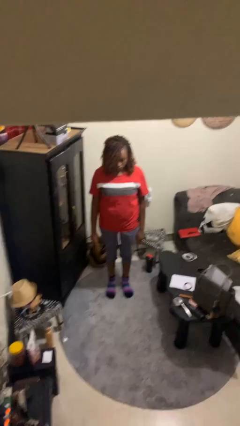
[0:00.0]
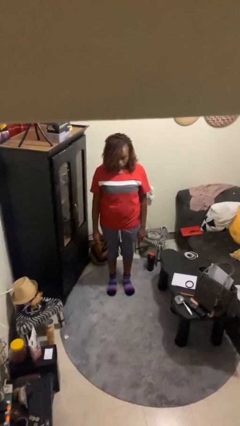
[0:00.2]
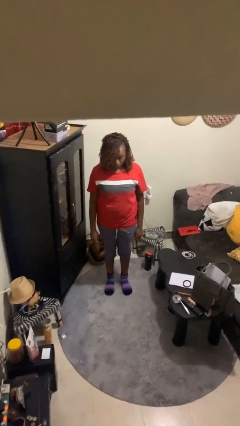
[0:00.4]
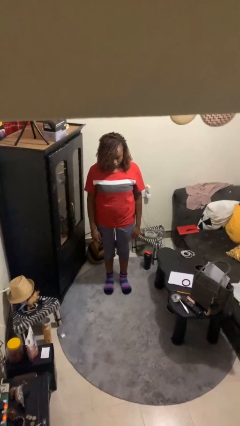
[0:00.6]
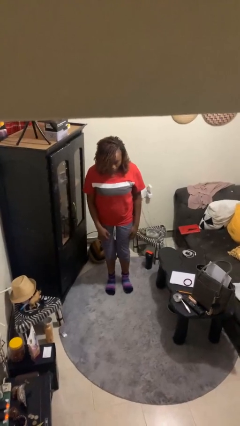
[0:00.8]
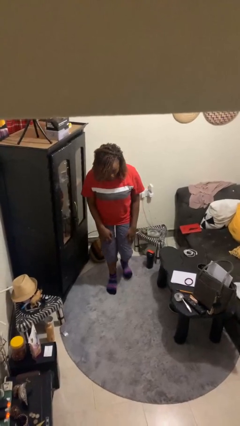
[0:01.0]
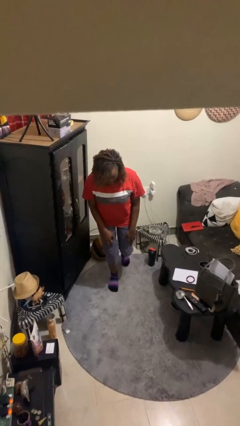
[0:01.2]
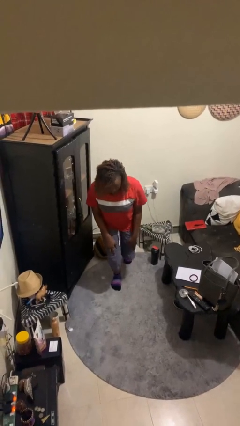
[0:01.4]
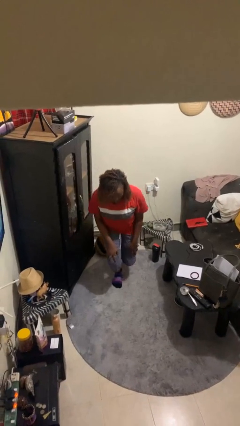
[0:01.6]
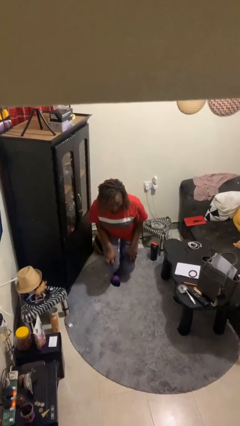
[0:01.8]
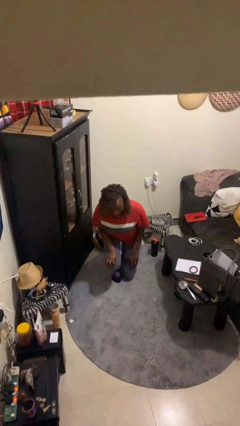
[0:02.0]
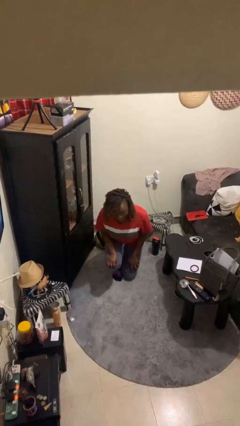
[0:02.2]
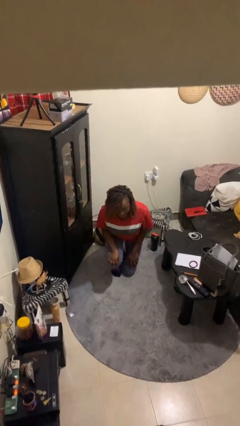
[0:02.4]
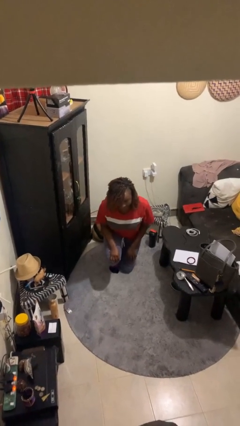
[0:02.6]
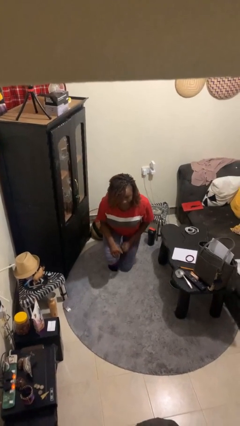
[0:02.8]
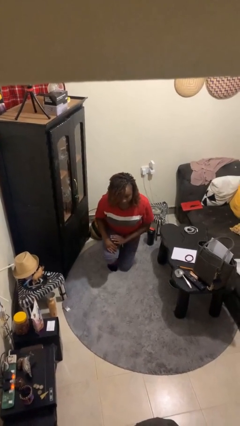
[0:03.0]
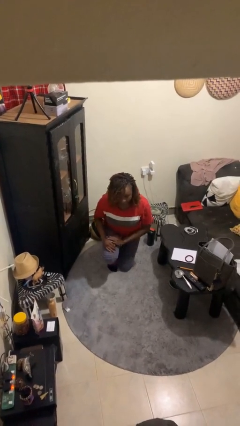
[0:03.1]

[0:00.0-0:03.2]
person kneels

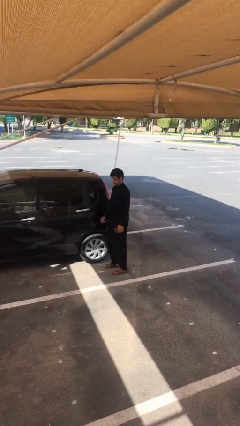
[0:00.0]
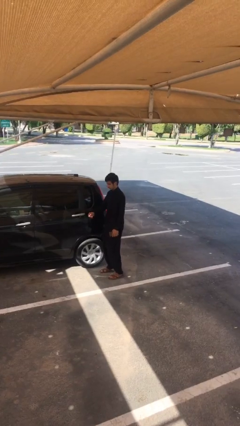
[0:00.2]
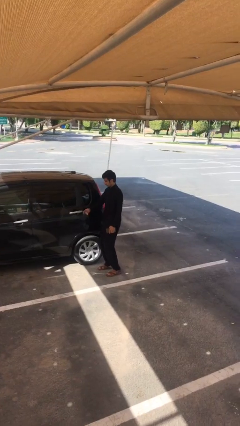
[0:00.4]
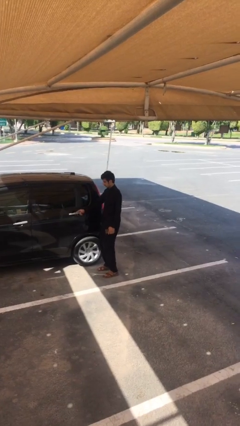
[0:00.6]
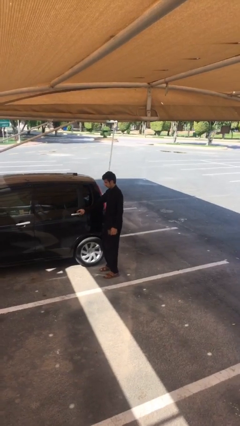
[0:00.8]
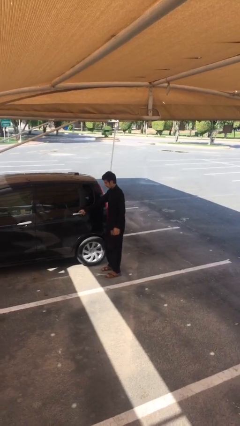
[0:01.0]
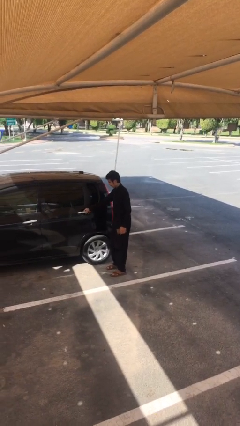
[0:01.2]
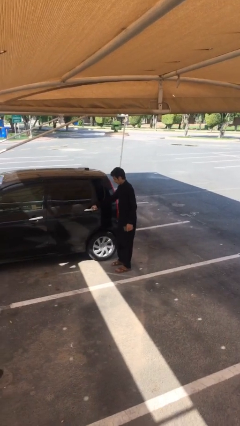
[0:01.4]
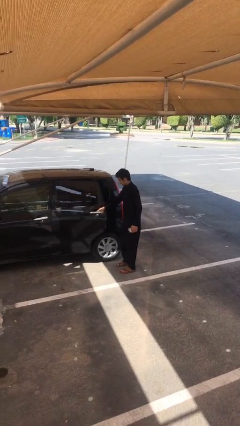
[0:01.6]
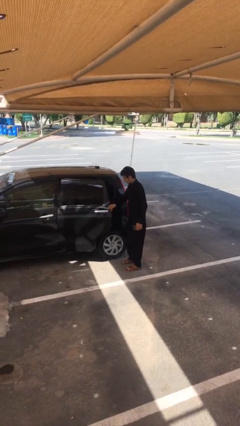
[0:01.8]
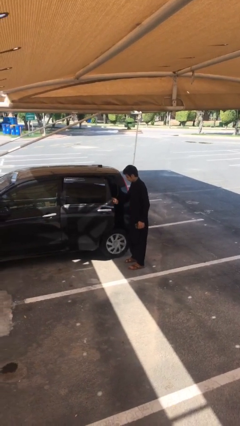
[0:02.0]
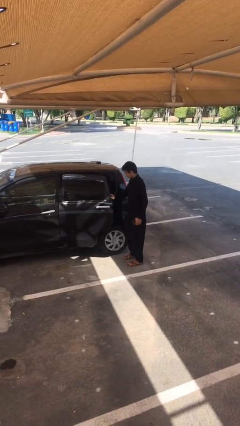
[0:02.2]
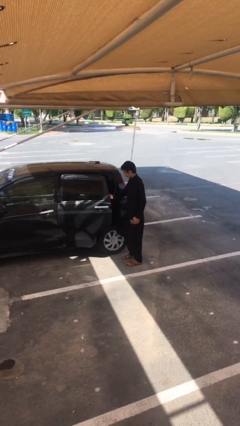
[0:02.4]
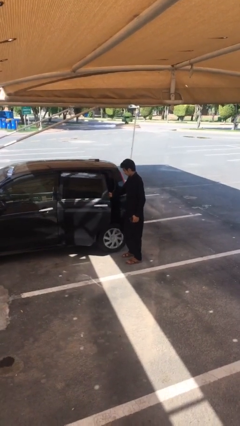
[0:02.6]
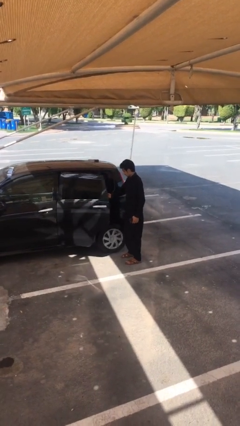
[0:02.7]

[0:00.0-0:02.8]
person opens car door

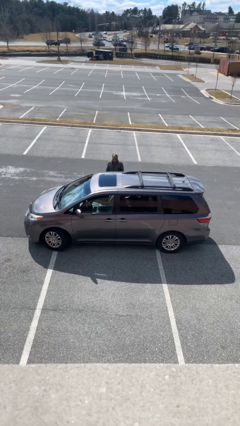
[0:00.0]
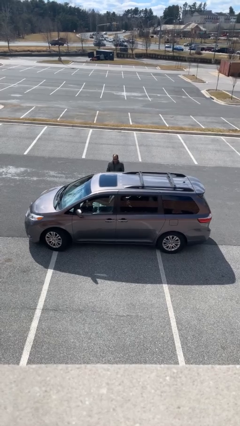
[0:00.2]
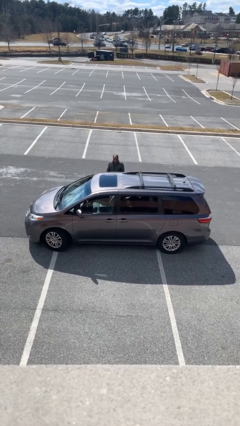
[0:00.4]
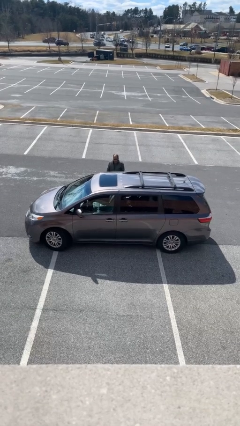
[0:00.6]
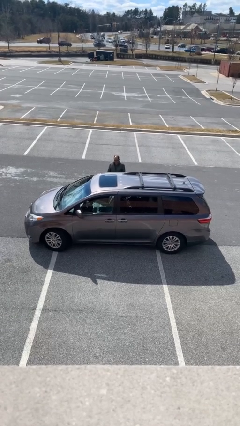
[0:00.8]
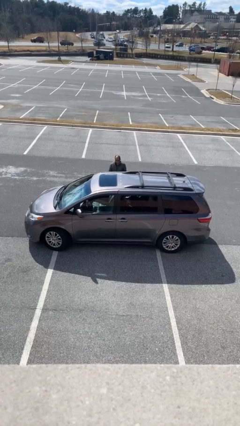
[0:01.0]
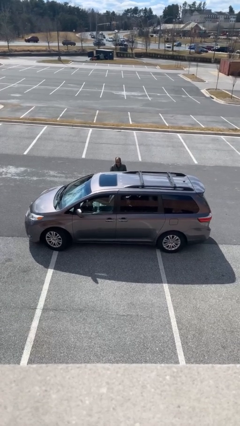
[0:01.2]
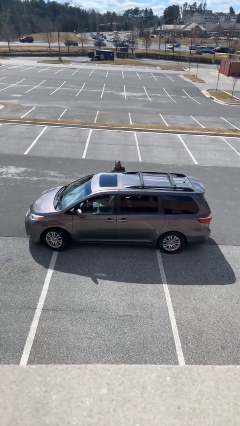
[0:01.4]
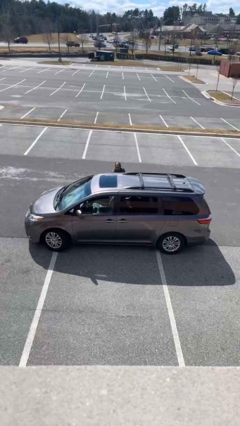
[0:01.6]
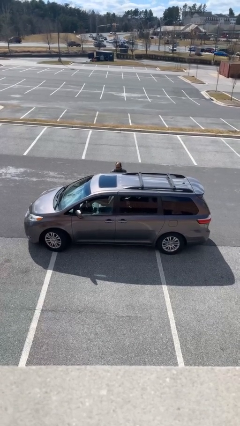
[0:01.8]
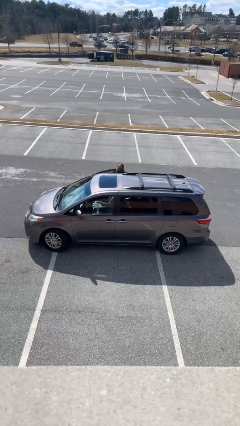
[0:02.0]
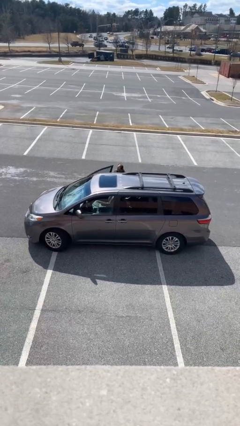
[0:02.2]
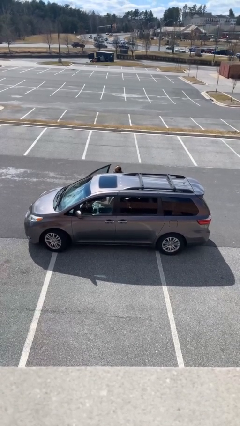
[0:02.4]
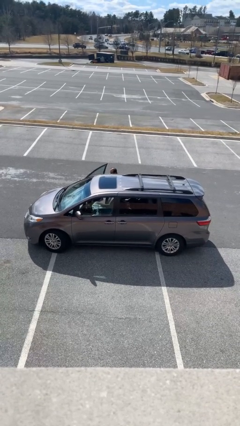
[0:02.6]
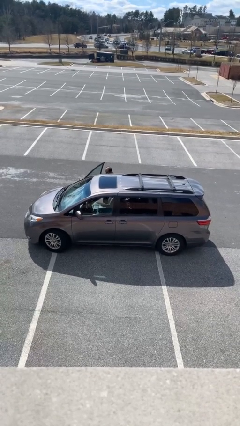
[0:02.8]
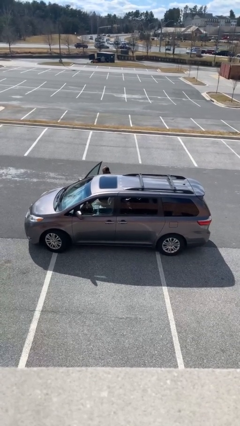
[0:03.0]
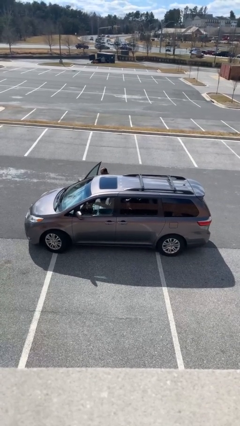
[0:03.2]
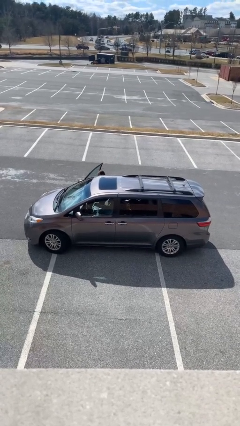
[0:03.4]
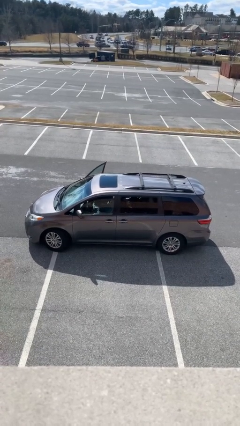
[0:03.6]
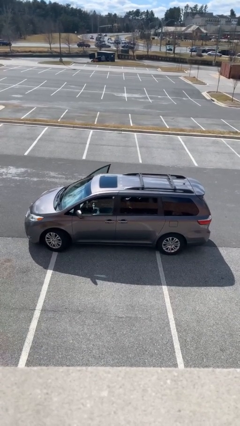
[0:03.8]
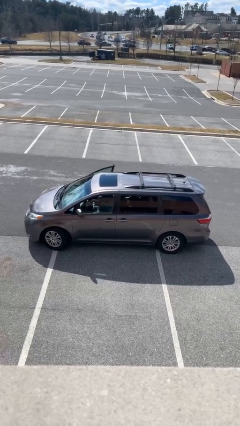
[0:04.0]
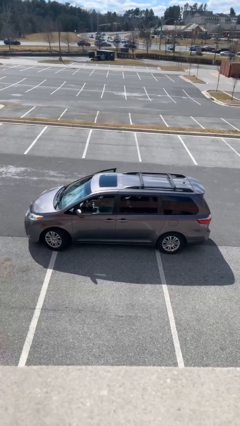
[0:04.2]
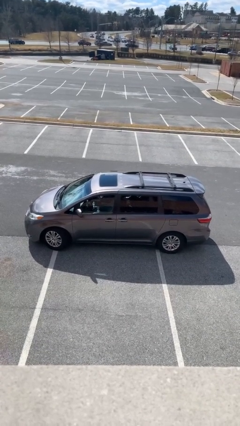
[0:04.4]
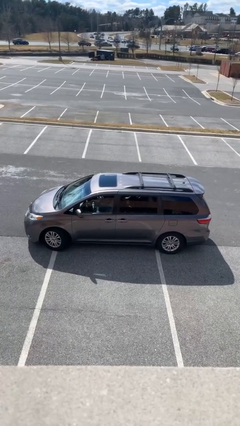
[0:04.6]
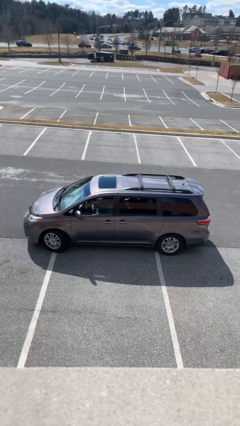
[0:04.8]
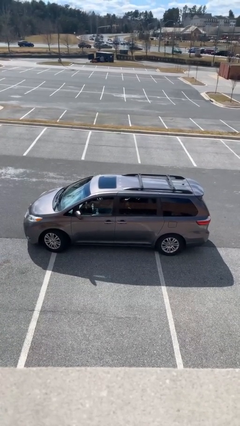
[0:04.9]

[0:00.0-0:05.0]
car picks up person

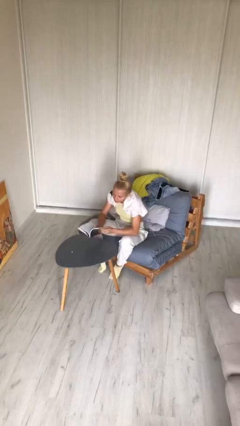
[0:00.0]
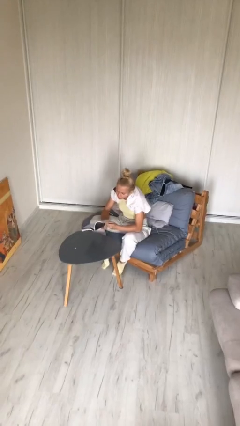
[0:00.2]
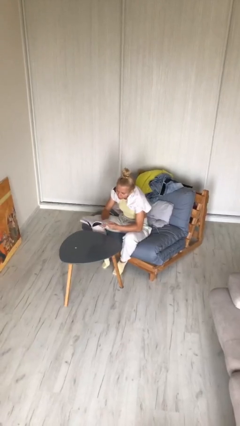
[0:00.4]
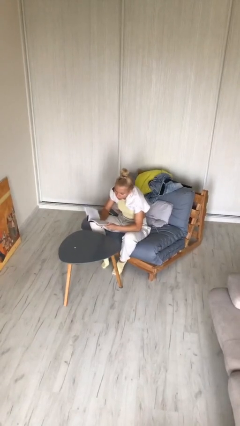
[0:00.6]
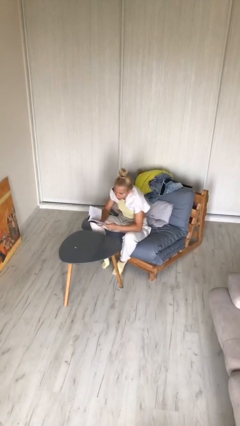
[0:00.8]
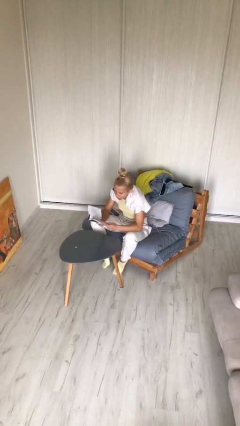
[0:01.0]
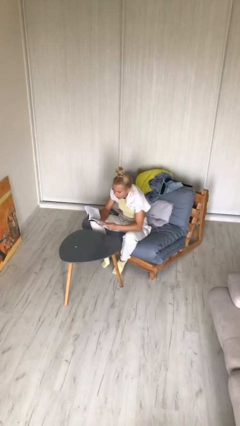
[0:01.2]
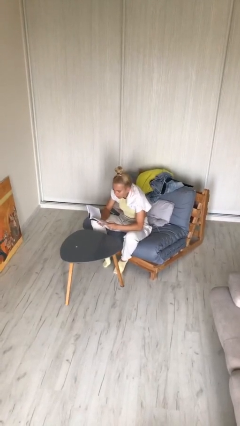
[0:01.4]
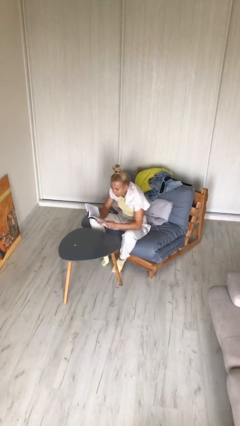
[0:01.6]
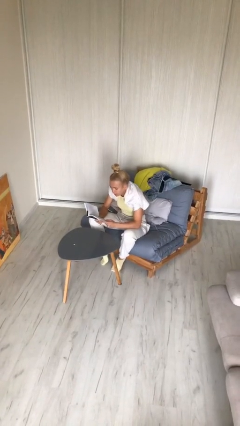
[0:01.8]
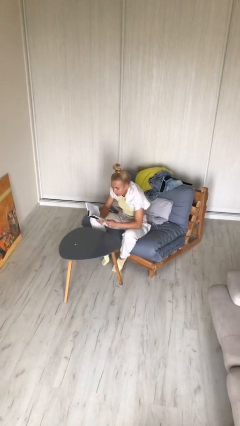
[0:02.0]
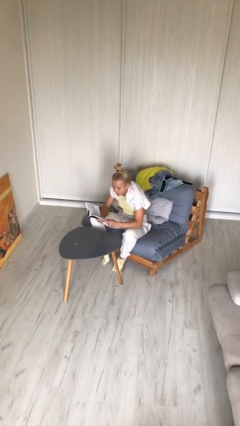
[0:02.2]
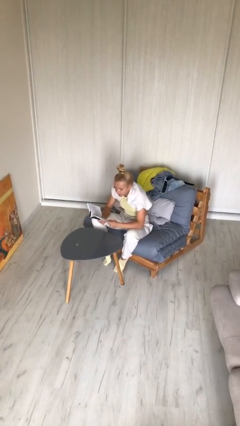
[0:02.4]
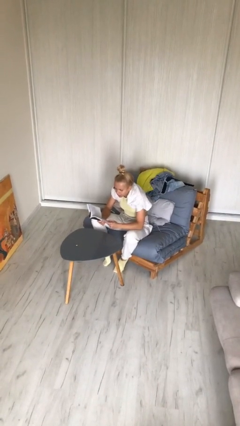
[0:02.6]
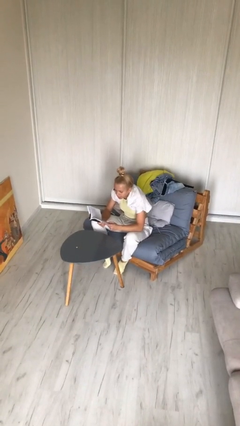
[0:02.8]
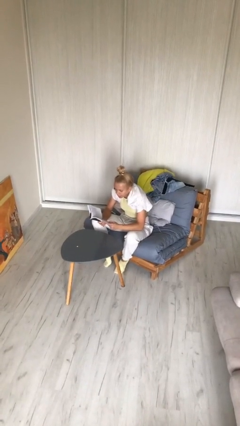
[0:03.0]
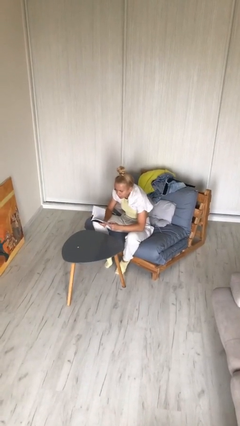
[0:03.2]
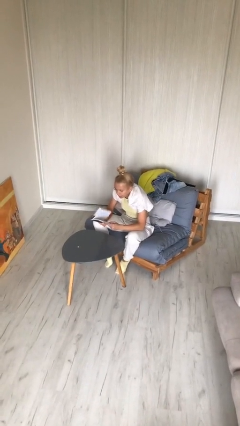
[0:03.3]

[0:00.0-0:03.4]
person reads document

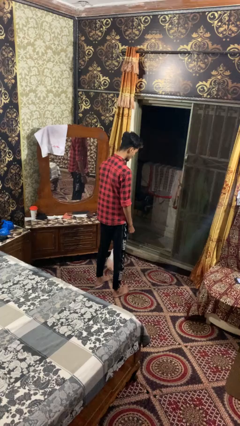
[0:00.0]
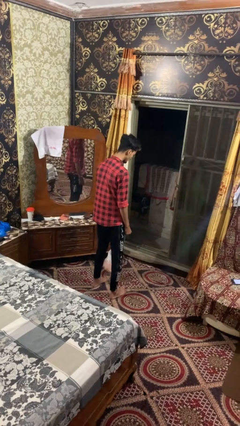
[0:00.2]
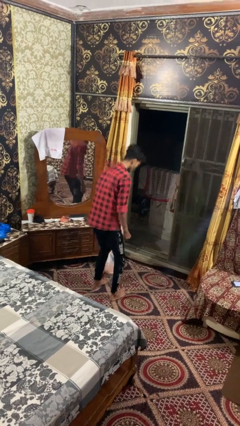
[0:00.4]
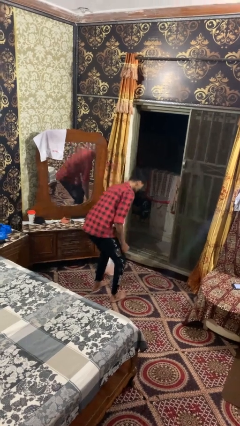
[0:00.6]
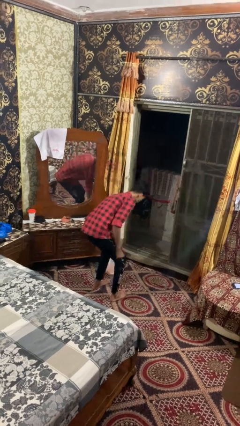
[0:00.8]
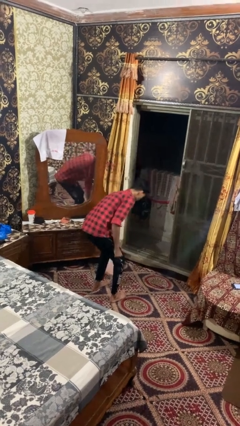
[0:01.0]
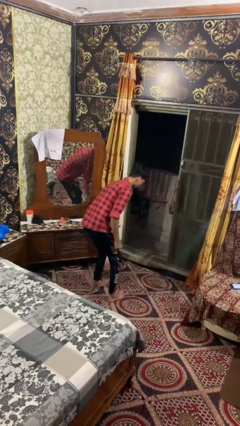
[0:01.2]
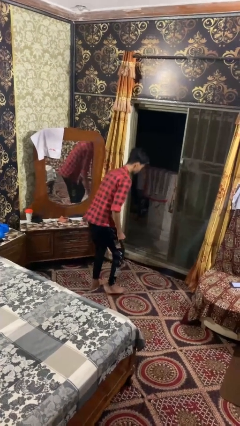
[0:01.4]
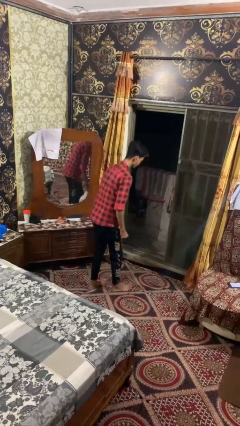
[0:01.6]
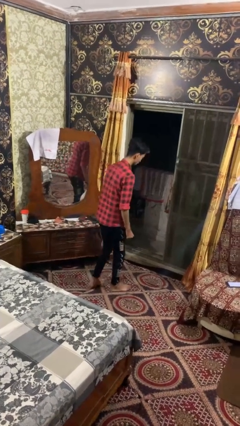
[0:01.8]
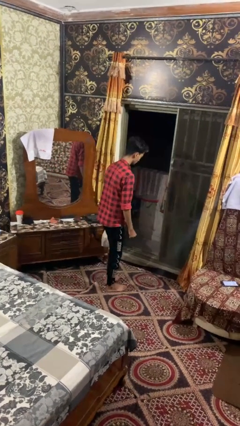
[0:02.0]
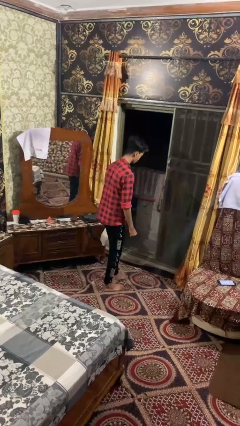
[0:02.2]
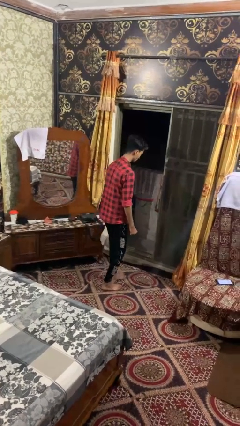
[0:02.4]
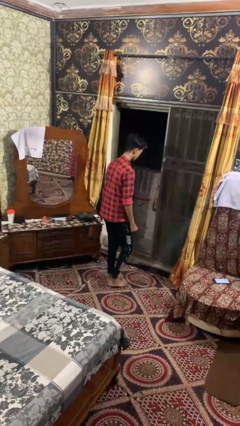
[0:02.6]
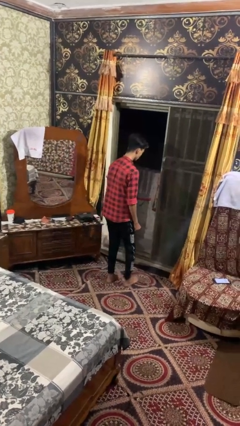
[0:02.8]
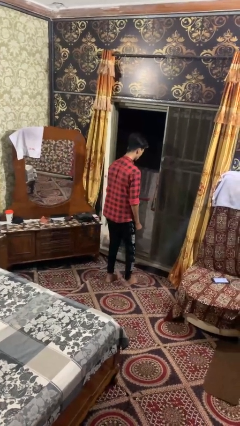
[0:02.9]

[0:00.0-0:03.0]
person carries groceries

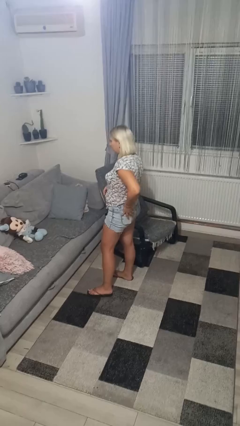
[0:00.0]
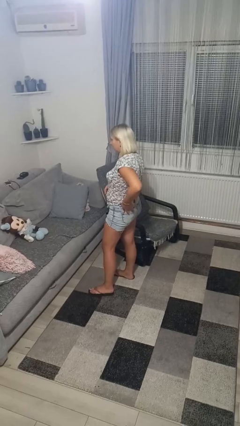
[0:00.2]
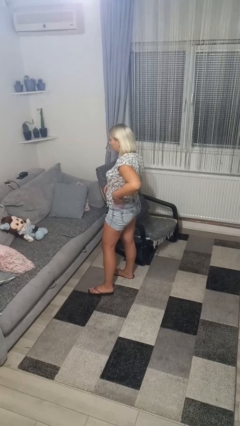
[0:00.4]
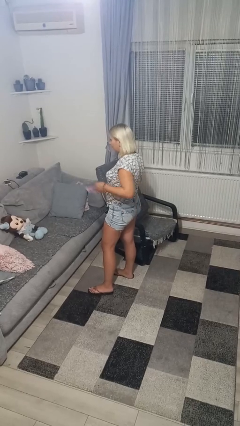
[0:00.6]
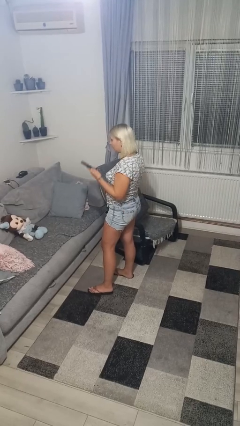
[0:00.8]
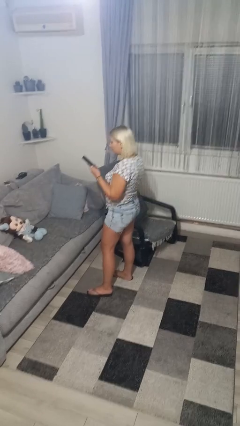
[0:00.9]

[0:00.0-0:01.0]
person takes phone from pocket
